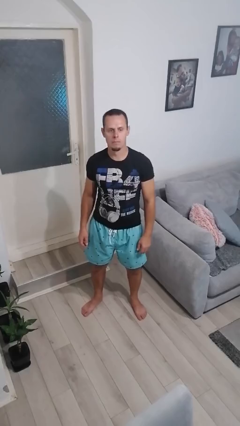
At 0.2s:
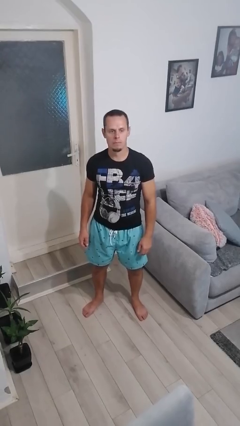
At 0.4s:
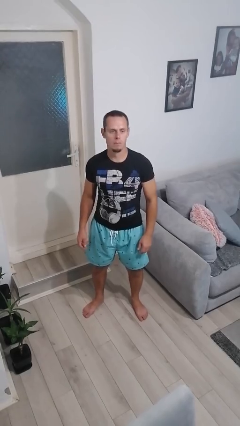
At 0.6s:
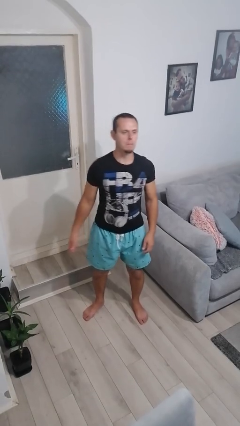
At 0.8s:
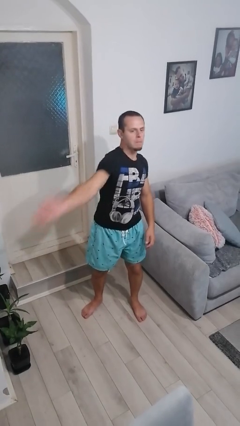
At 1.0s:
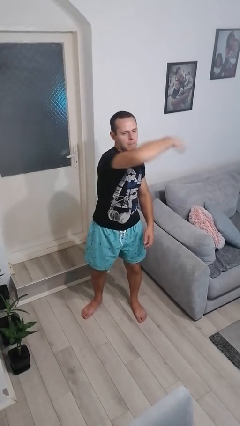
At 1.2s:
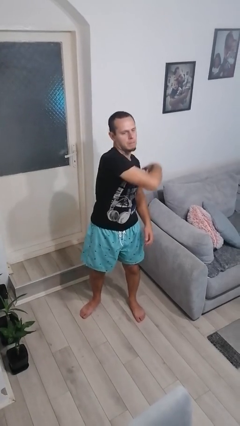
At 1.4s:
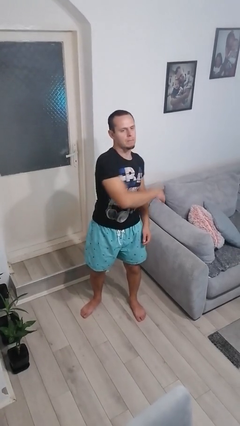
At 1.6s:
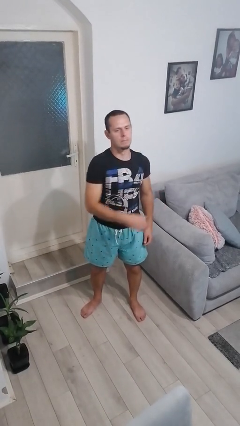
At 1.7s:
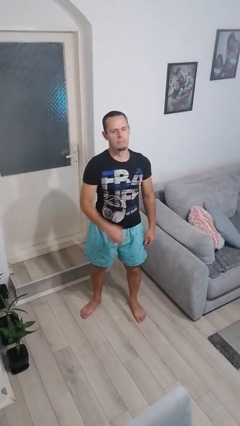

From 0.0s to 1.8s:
person punches

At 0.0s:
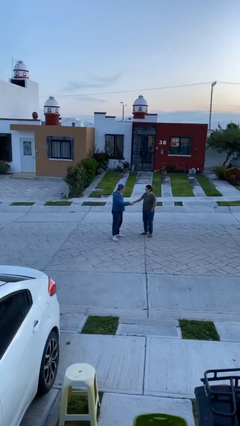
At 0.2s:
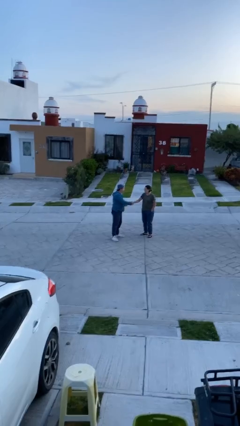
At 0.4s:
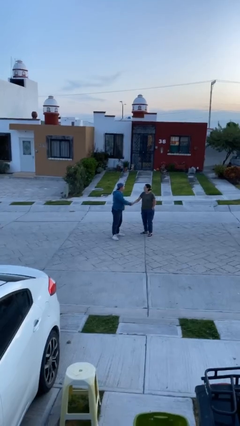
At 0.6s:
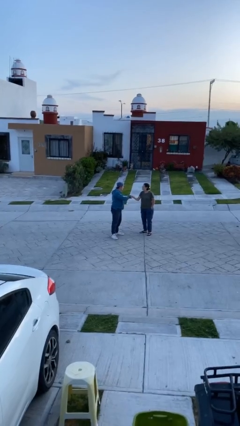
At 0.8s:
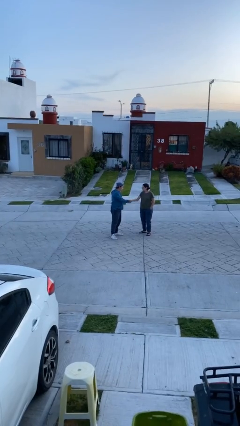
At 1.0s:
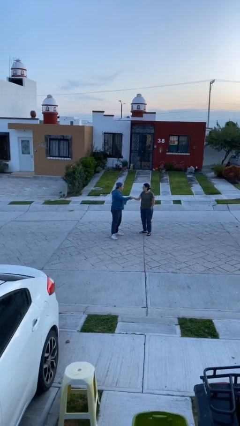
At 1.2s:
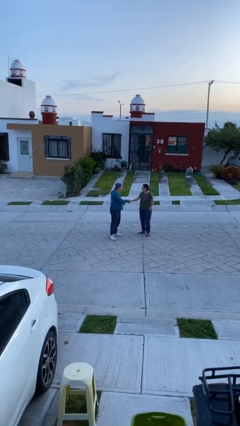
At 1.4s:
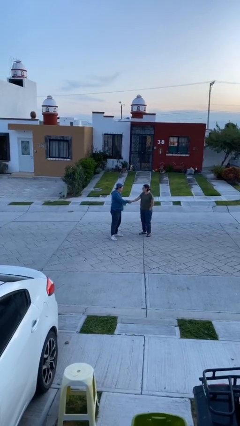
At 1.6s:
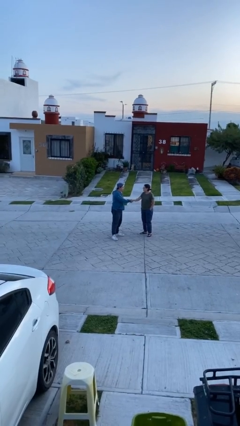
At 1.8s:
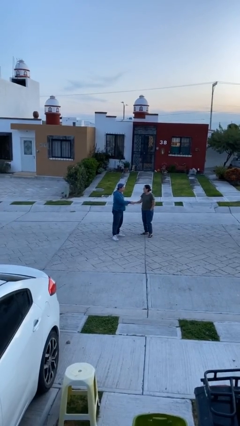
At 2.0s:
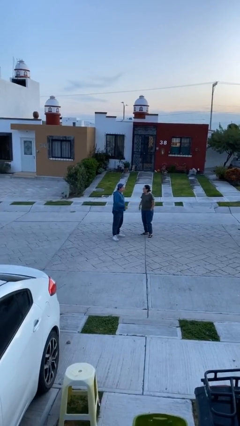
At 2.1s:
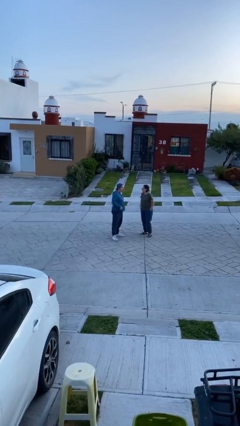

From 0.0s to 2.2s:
person shakes hand

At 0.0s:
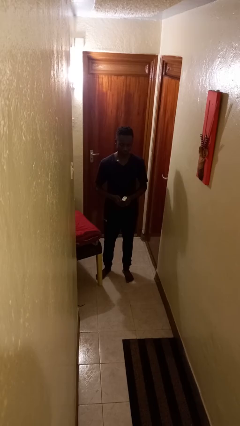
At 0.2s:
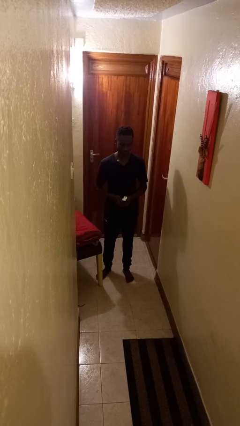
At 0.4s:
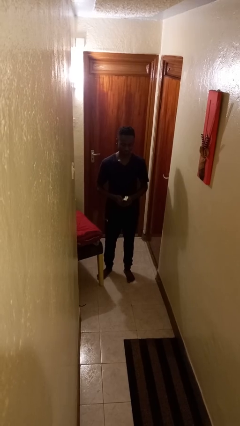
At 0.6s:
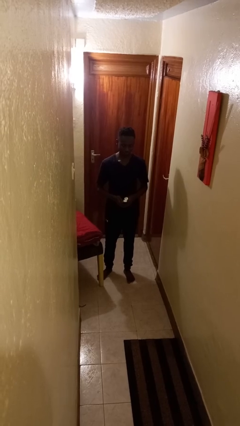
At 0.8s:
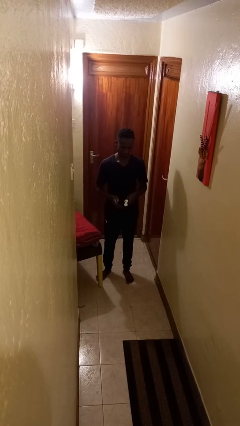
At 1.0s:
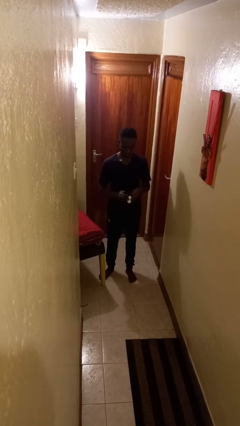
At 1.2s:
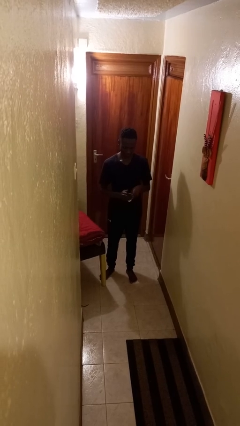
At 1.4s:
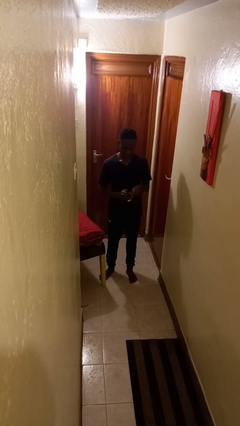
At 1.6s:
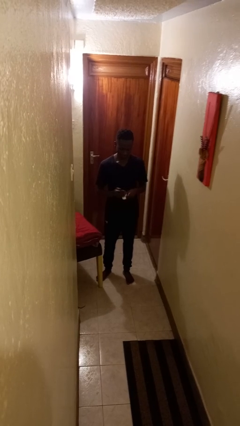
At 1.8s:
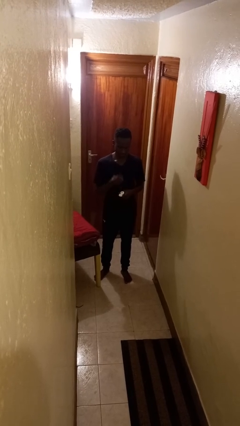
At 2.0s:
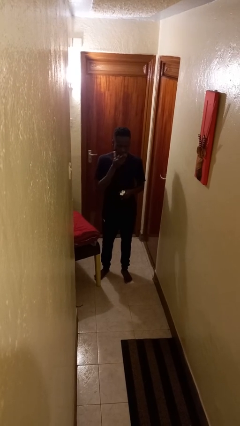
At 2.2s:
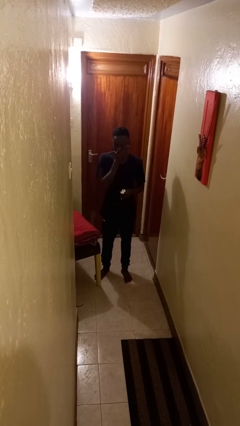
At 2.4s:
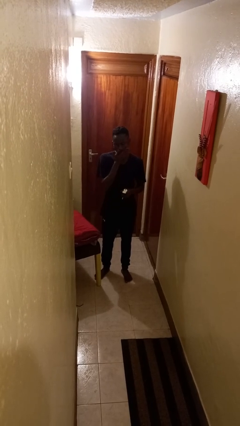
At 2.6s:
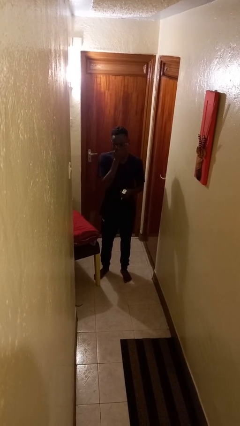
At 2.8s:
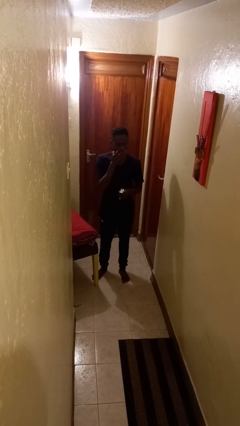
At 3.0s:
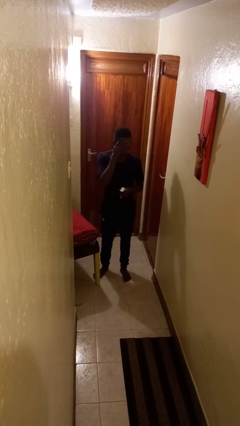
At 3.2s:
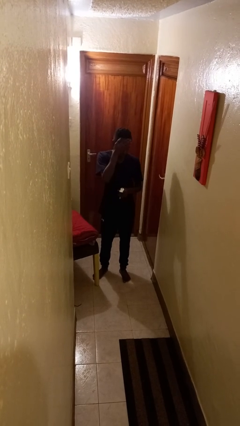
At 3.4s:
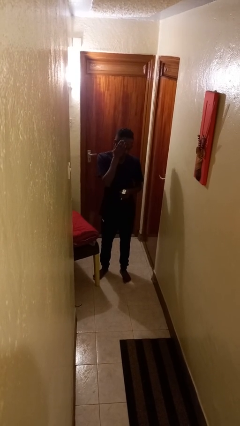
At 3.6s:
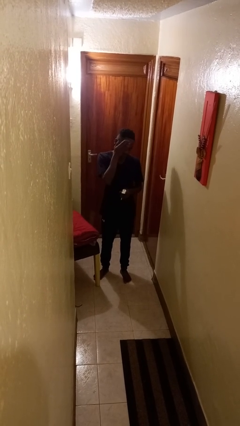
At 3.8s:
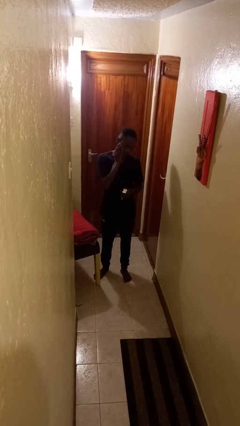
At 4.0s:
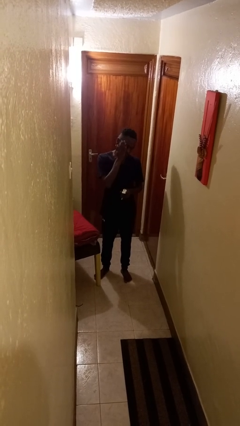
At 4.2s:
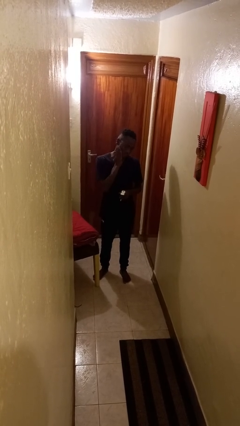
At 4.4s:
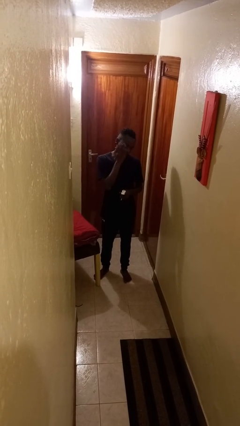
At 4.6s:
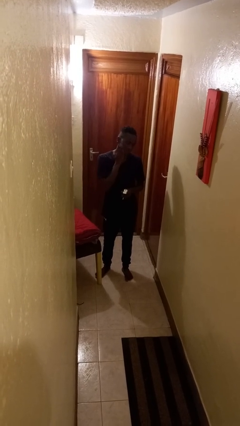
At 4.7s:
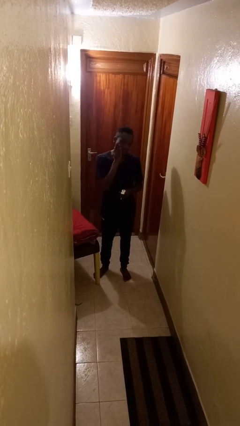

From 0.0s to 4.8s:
person applies sunscreen

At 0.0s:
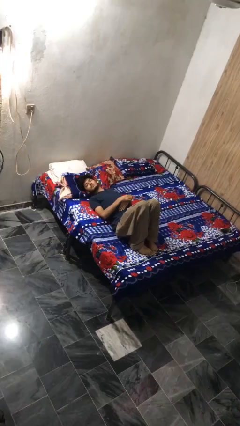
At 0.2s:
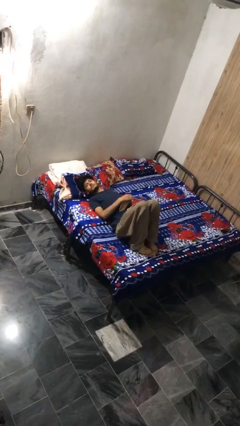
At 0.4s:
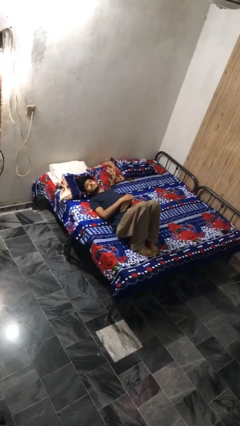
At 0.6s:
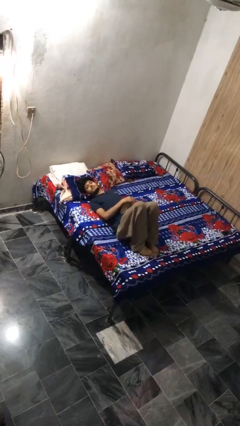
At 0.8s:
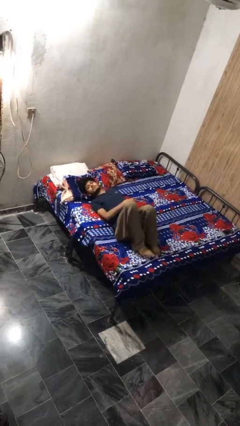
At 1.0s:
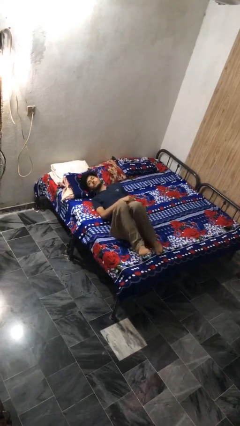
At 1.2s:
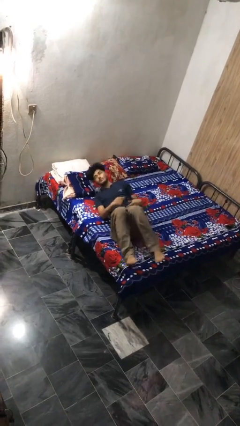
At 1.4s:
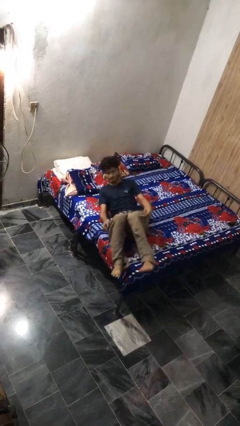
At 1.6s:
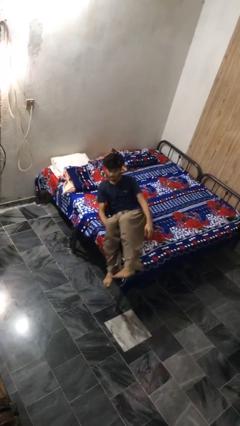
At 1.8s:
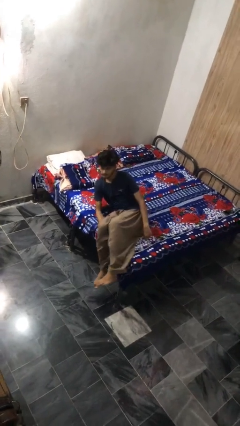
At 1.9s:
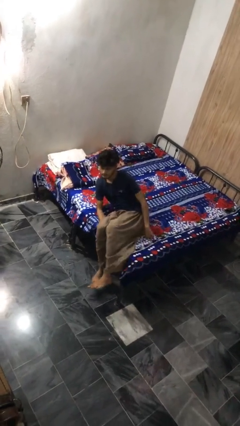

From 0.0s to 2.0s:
person stands up

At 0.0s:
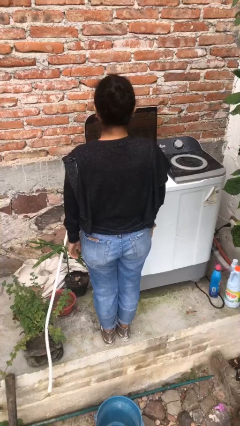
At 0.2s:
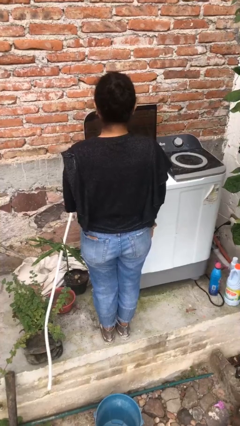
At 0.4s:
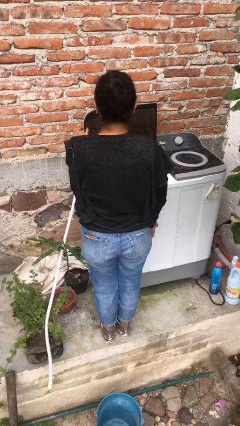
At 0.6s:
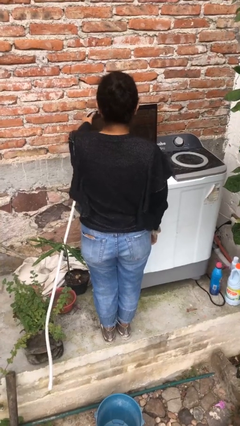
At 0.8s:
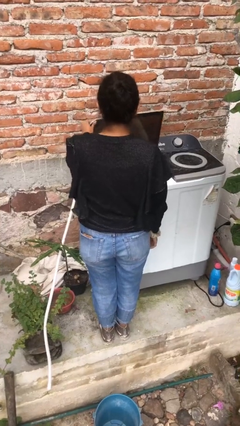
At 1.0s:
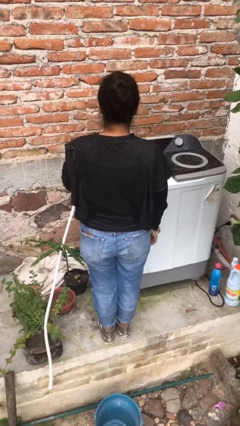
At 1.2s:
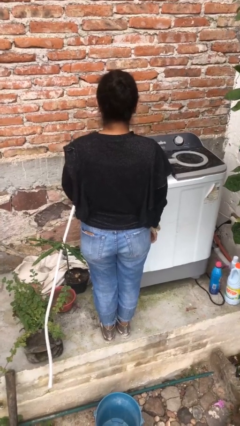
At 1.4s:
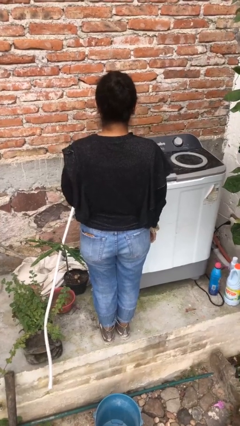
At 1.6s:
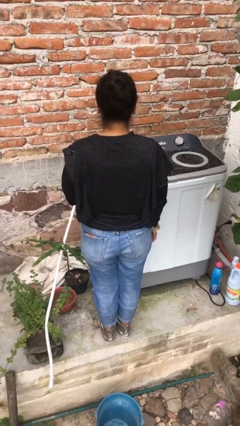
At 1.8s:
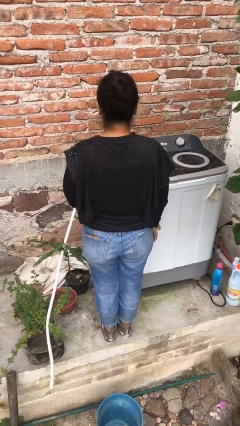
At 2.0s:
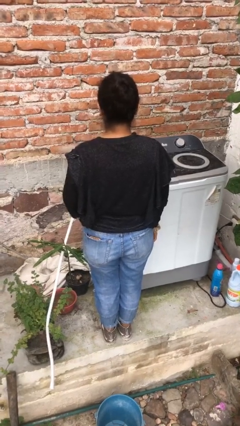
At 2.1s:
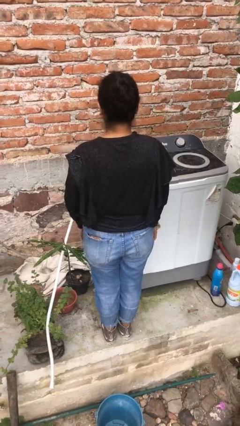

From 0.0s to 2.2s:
person closes clothes washer

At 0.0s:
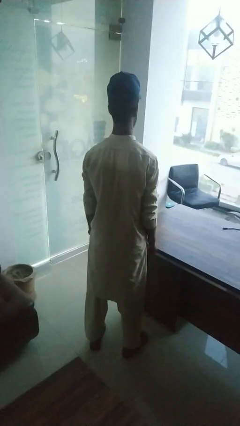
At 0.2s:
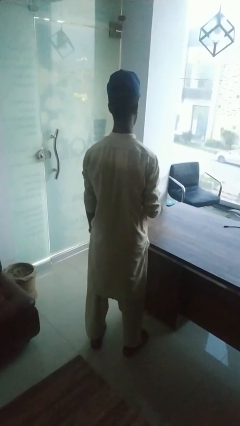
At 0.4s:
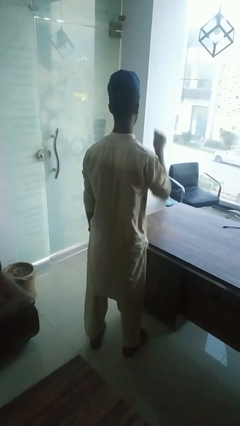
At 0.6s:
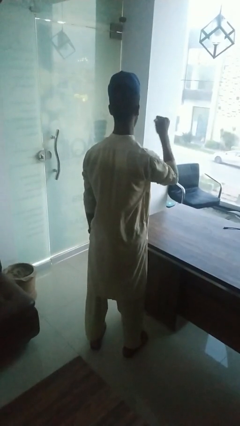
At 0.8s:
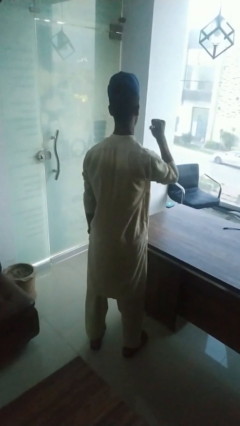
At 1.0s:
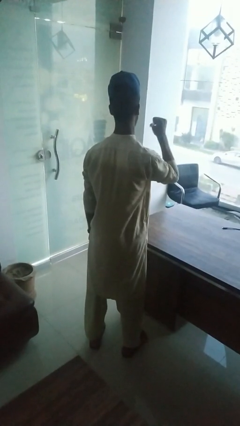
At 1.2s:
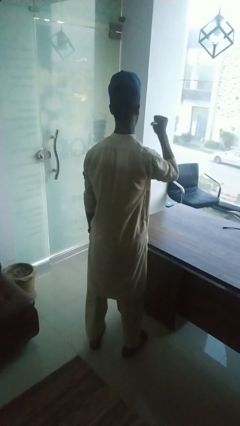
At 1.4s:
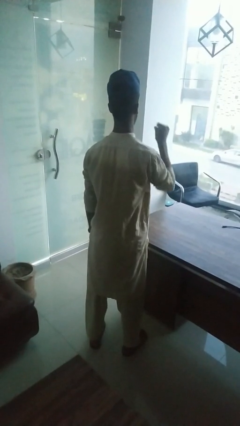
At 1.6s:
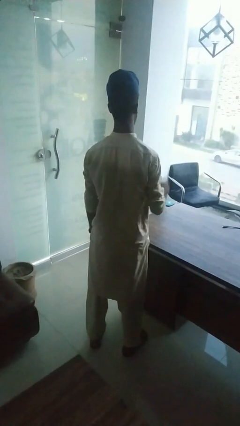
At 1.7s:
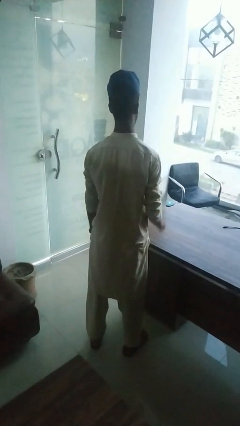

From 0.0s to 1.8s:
person gestures behind me

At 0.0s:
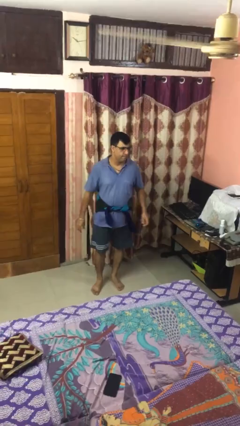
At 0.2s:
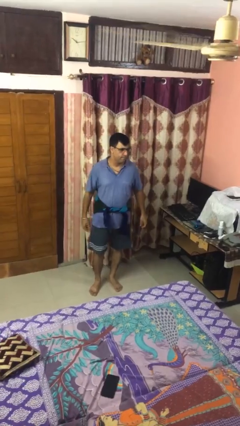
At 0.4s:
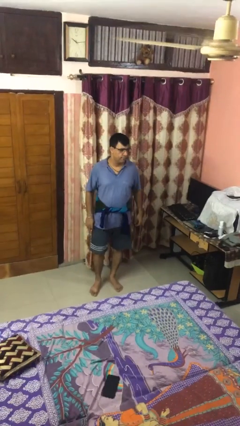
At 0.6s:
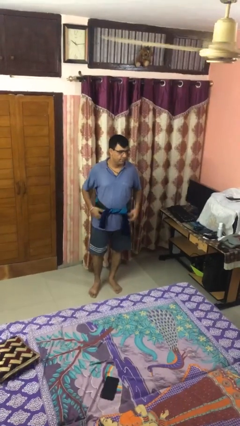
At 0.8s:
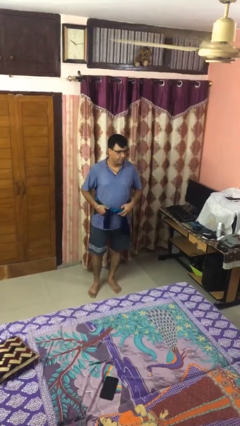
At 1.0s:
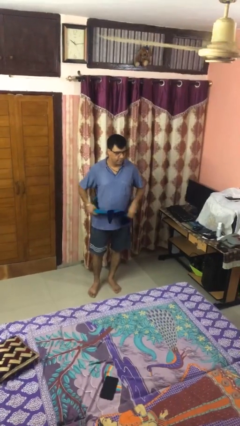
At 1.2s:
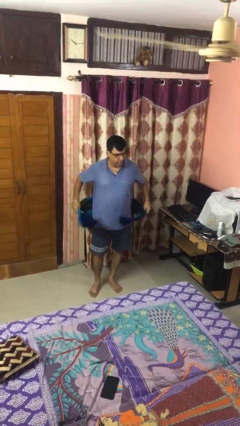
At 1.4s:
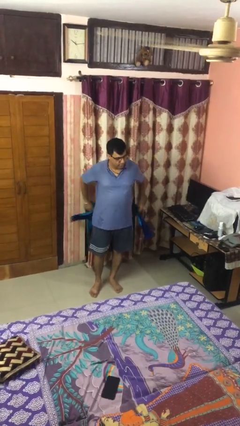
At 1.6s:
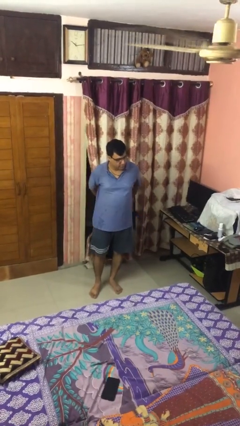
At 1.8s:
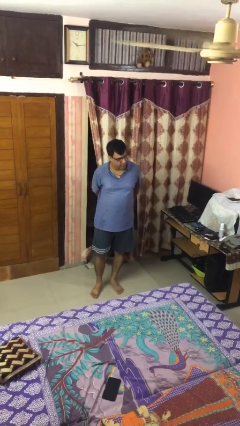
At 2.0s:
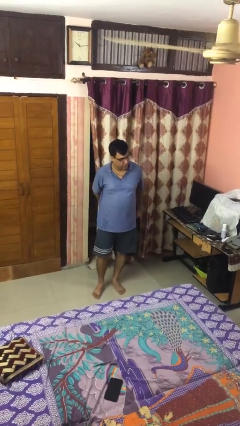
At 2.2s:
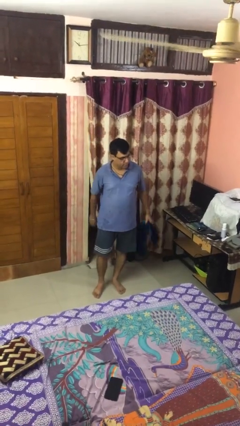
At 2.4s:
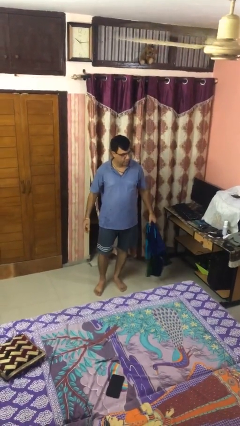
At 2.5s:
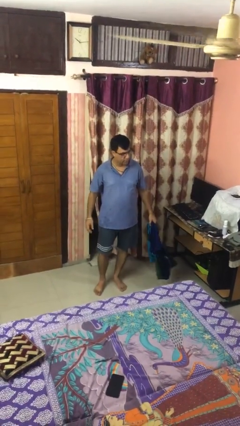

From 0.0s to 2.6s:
person unties jacket around waist
